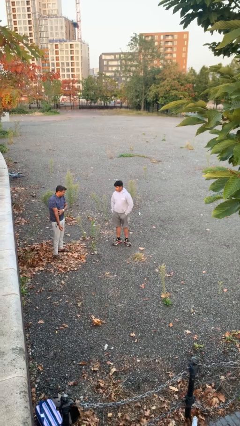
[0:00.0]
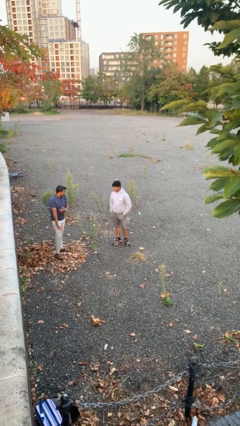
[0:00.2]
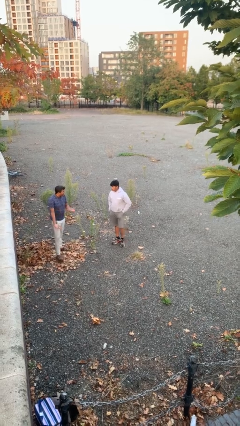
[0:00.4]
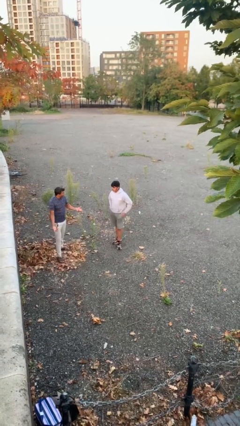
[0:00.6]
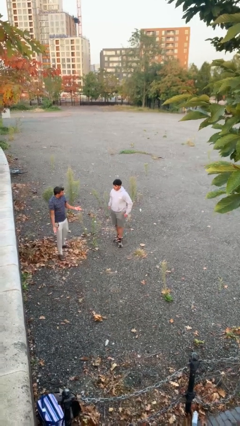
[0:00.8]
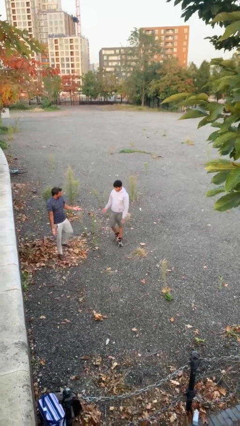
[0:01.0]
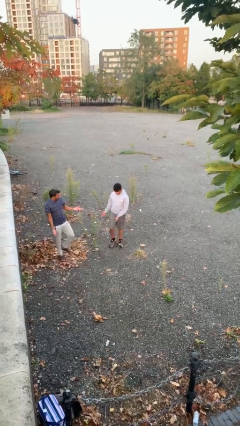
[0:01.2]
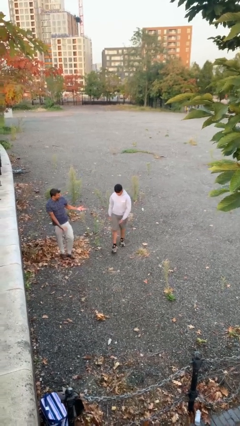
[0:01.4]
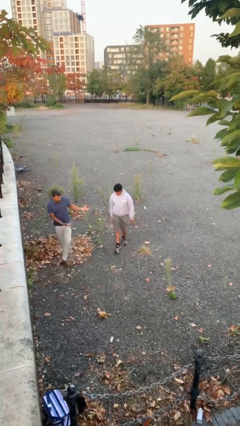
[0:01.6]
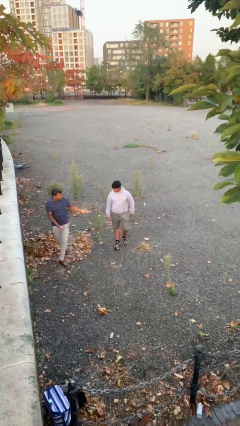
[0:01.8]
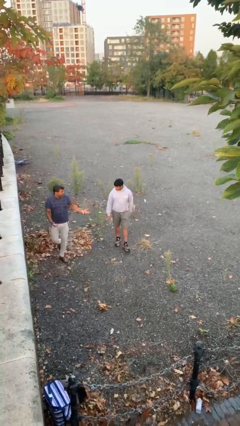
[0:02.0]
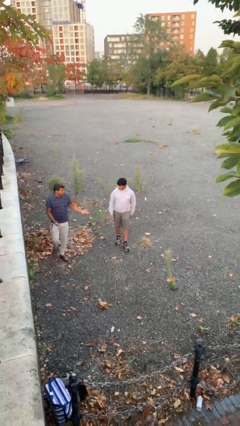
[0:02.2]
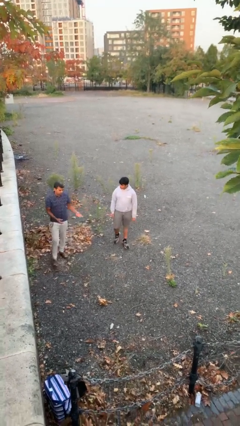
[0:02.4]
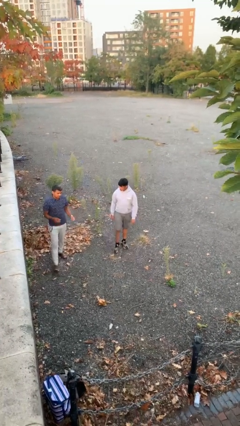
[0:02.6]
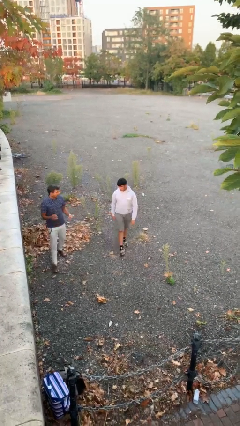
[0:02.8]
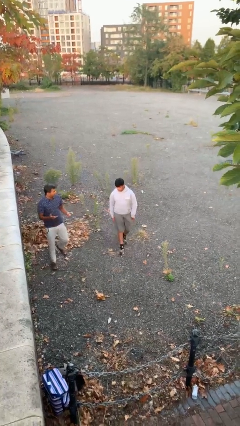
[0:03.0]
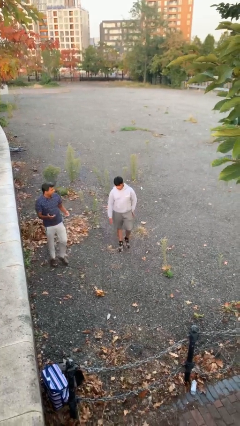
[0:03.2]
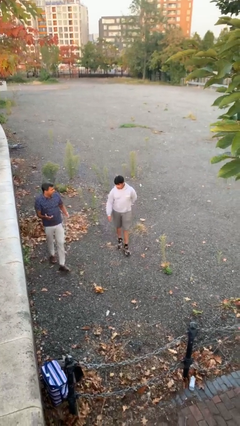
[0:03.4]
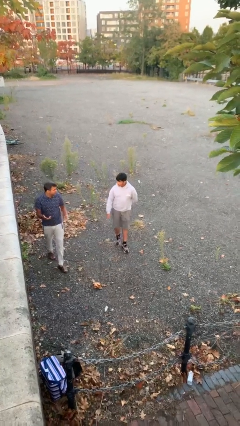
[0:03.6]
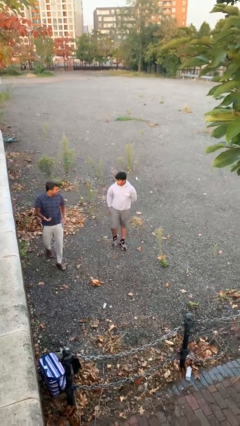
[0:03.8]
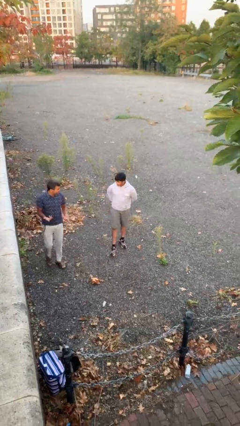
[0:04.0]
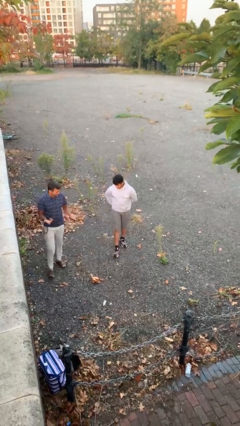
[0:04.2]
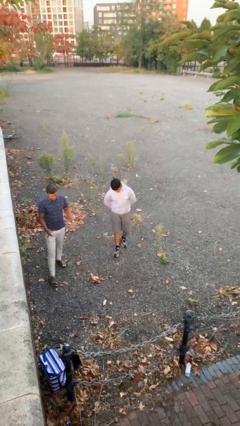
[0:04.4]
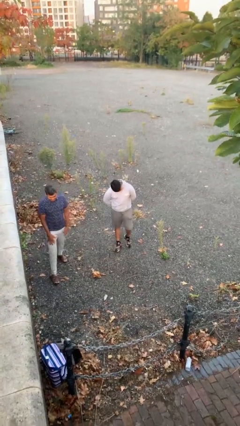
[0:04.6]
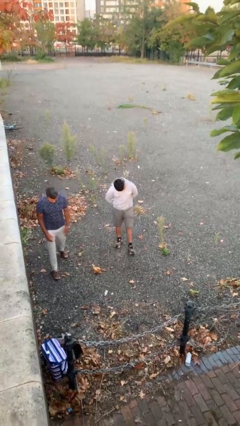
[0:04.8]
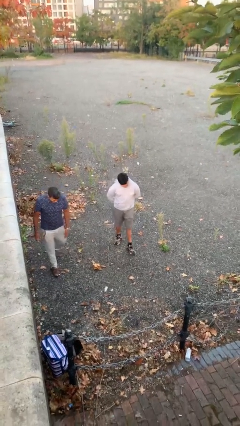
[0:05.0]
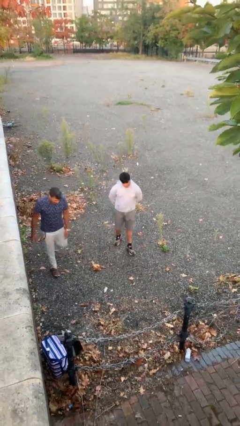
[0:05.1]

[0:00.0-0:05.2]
person talks to person

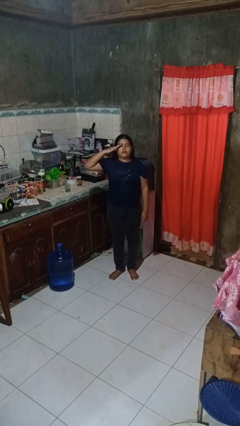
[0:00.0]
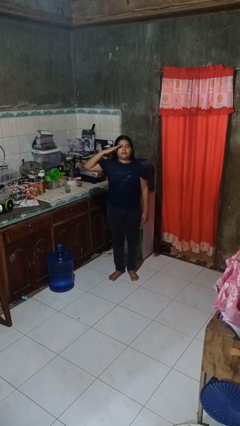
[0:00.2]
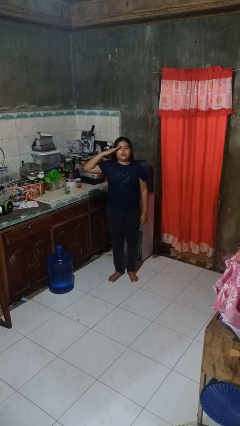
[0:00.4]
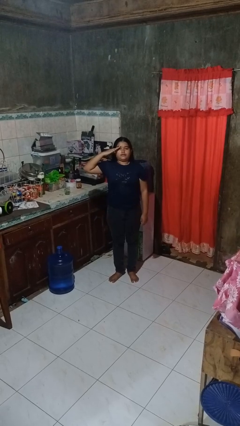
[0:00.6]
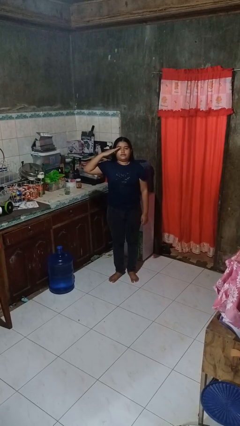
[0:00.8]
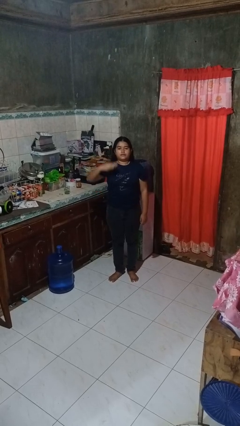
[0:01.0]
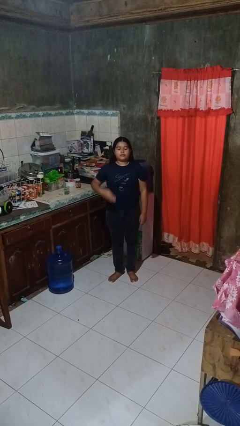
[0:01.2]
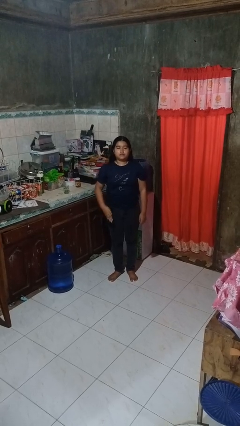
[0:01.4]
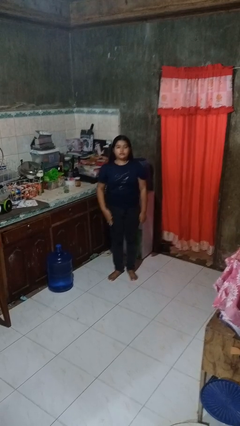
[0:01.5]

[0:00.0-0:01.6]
person salutes

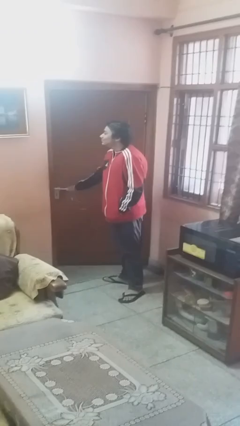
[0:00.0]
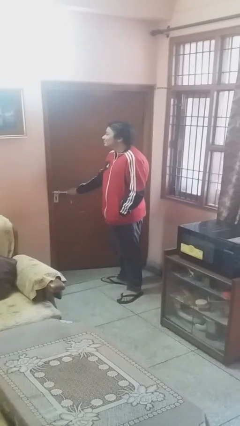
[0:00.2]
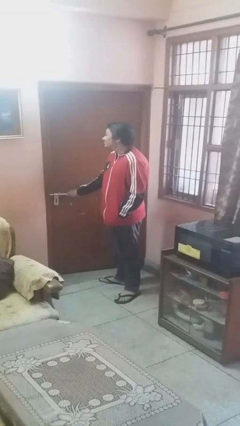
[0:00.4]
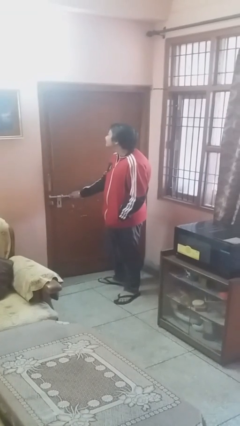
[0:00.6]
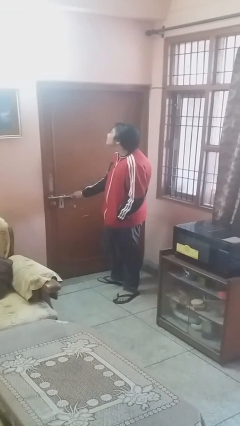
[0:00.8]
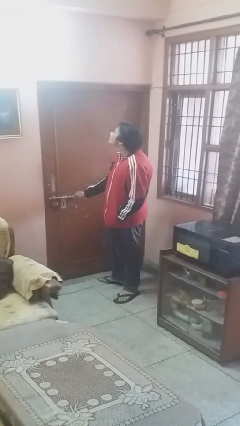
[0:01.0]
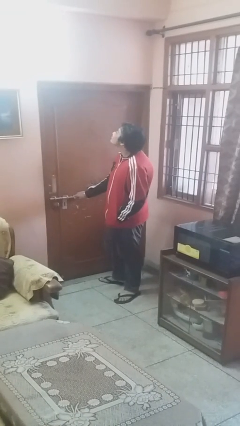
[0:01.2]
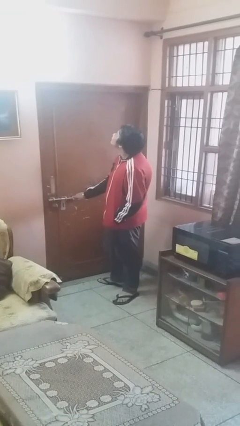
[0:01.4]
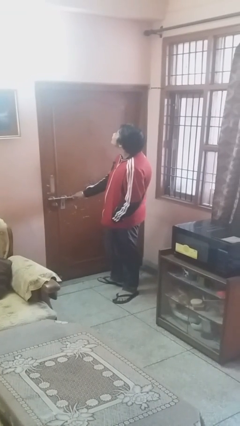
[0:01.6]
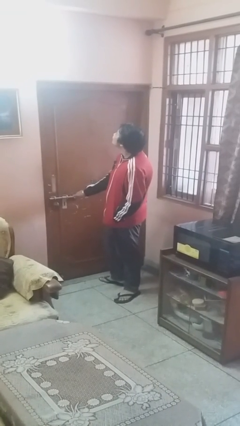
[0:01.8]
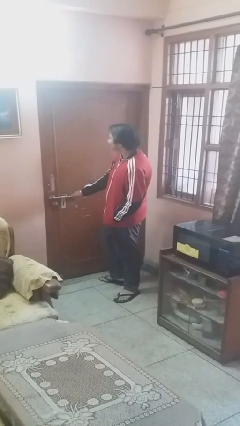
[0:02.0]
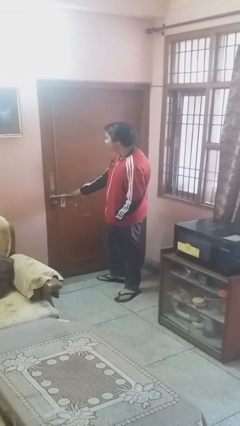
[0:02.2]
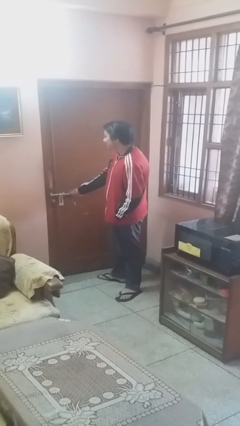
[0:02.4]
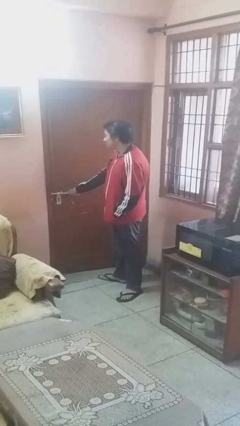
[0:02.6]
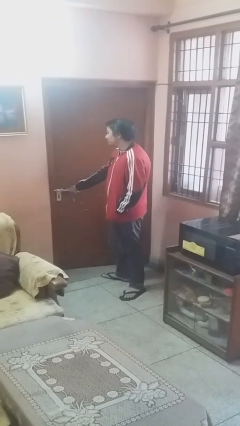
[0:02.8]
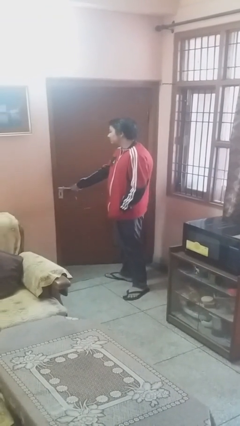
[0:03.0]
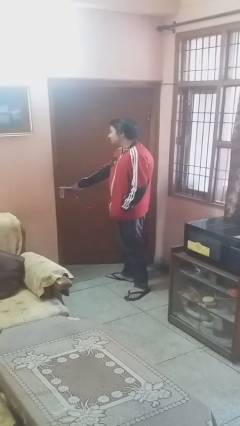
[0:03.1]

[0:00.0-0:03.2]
person closes facility door

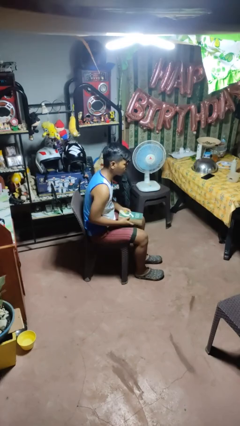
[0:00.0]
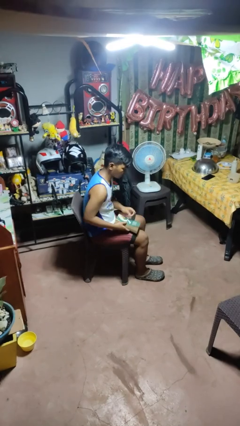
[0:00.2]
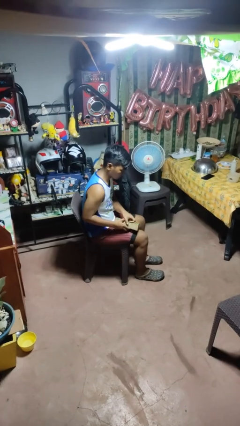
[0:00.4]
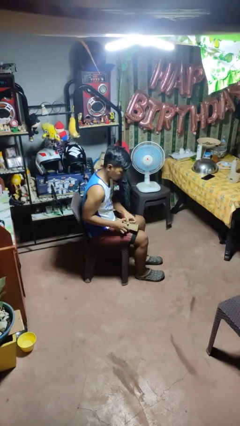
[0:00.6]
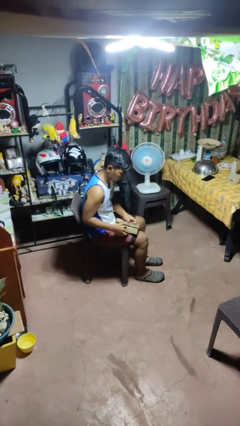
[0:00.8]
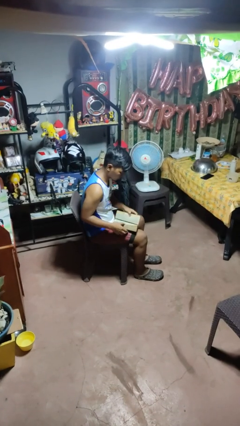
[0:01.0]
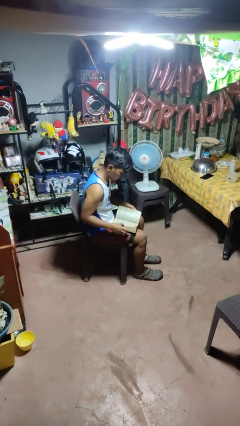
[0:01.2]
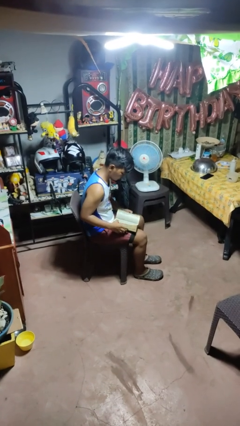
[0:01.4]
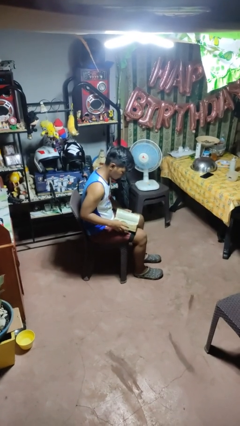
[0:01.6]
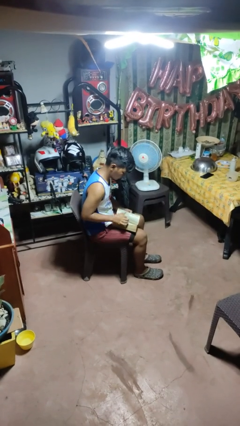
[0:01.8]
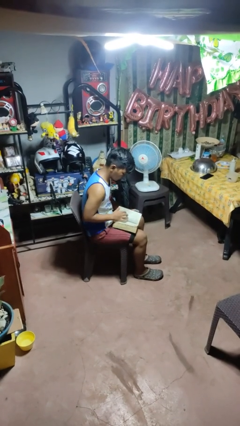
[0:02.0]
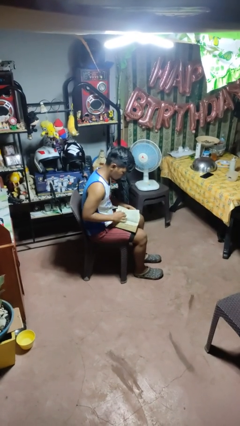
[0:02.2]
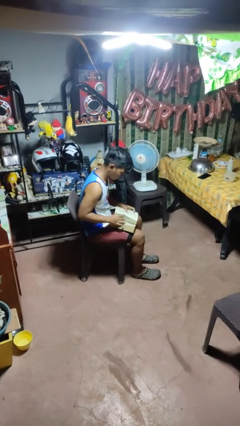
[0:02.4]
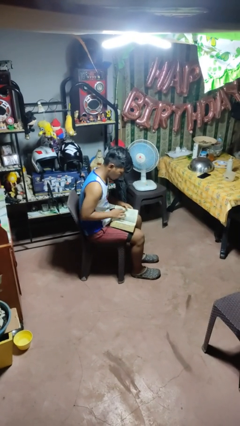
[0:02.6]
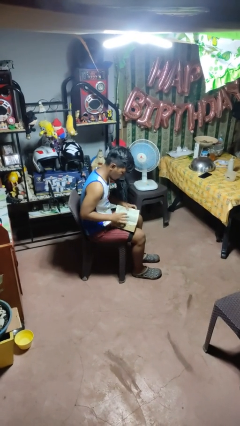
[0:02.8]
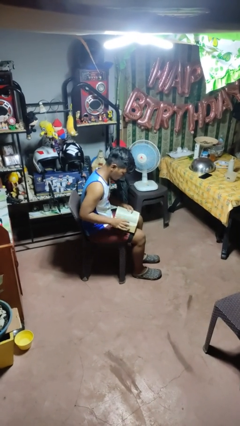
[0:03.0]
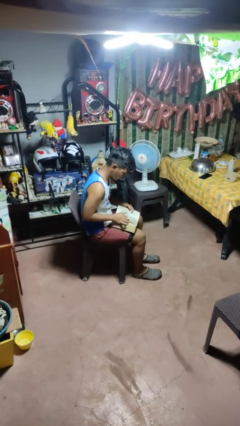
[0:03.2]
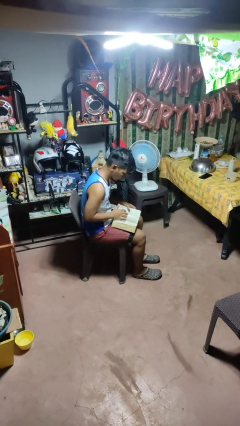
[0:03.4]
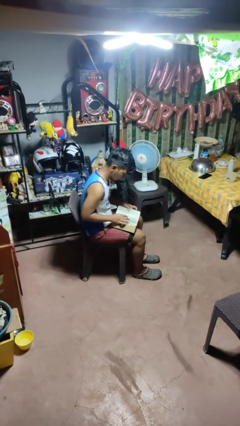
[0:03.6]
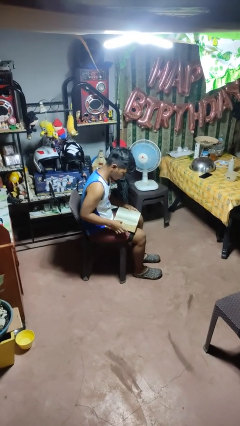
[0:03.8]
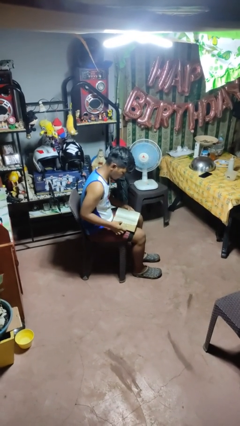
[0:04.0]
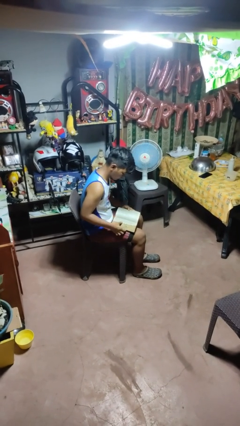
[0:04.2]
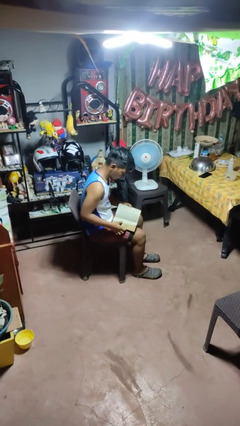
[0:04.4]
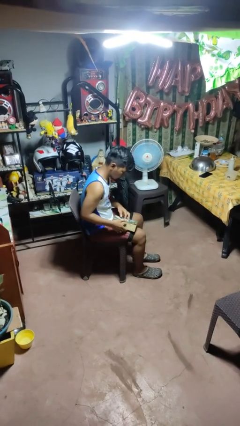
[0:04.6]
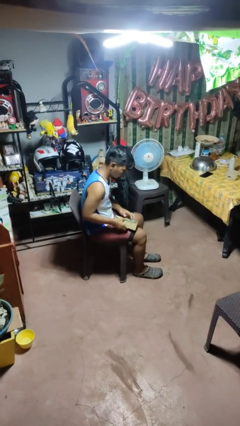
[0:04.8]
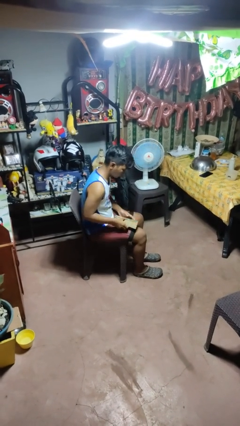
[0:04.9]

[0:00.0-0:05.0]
person reads book

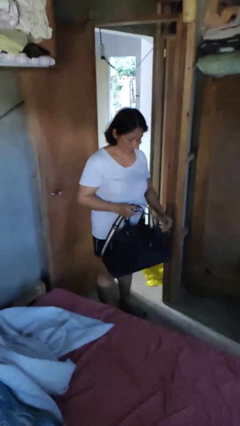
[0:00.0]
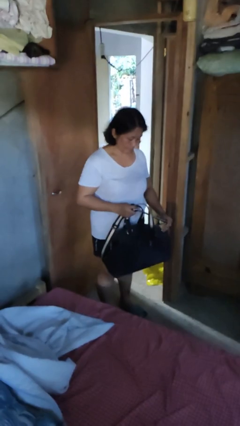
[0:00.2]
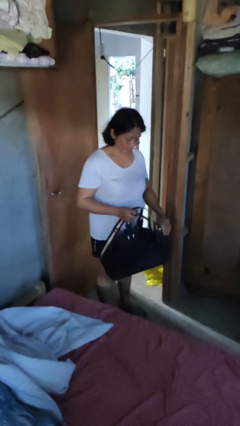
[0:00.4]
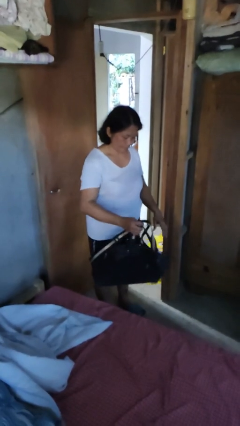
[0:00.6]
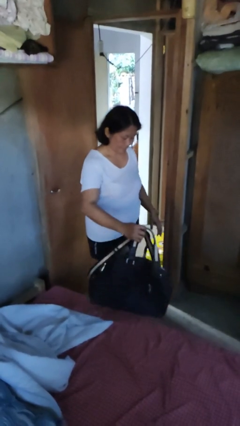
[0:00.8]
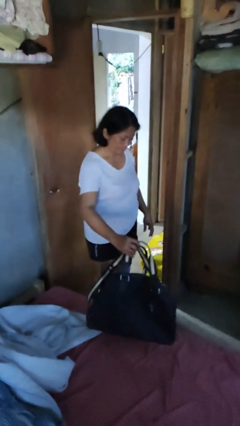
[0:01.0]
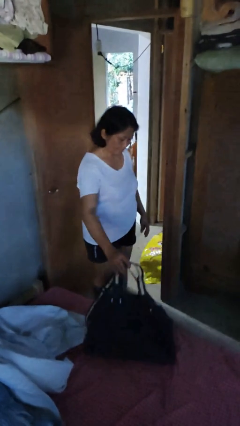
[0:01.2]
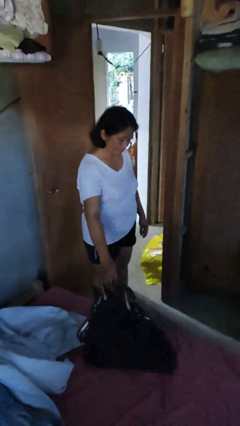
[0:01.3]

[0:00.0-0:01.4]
person puts down object on bed

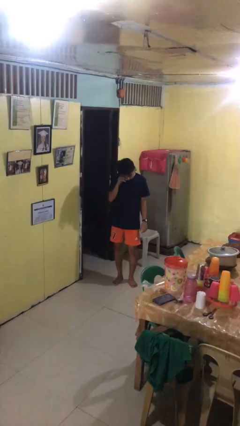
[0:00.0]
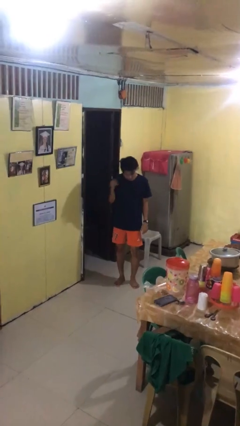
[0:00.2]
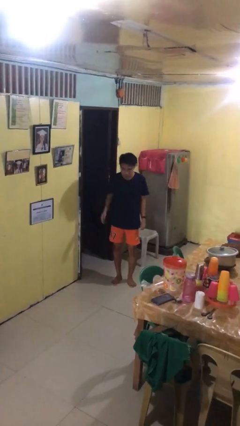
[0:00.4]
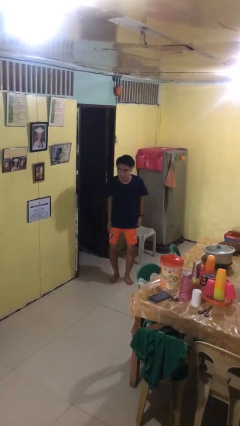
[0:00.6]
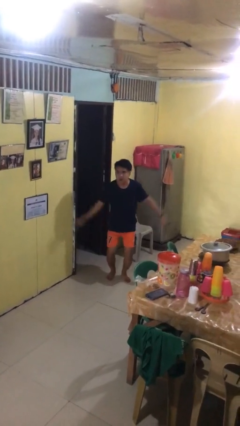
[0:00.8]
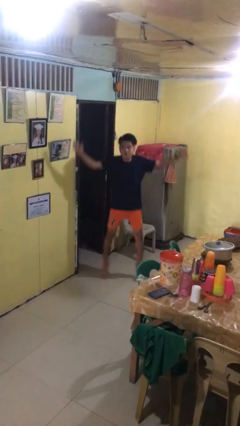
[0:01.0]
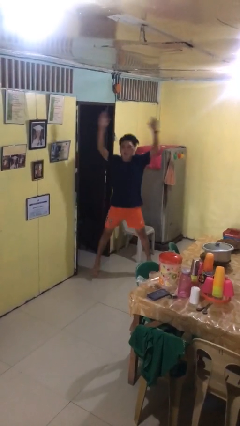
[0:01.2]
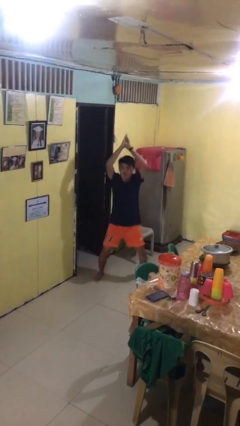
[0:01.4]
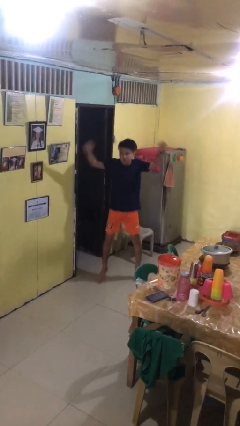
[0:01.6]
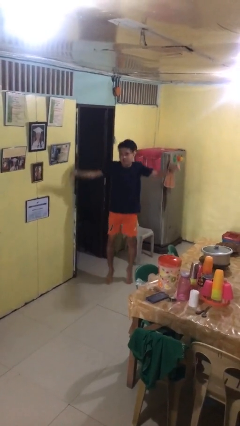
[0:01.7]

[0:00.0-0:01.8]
person exercises with jumping jacks
